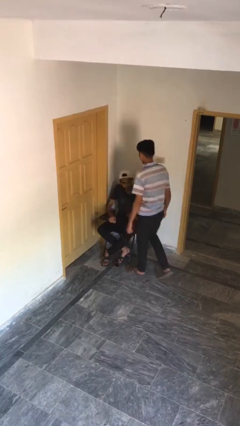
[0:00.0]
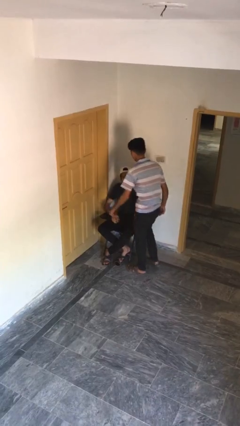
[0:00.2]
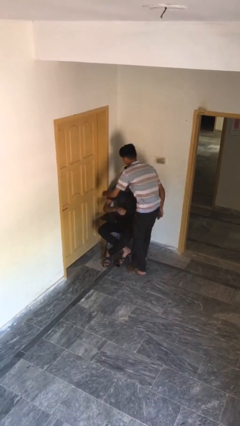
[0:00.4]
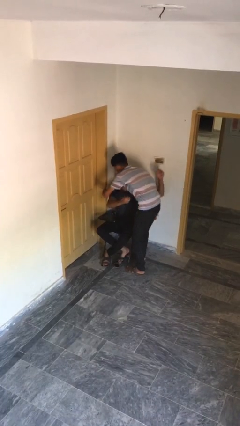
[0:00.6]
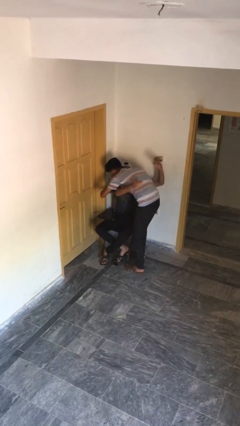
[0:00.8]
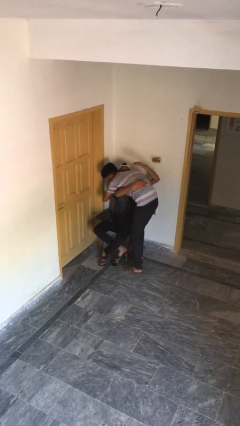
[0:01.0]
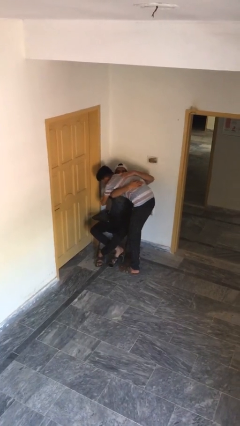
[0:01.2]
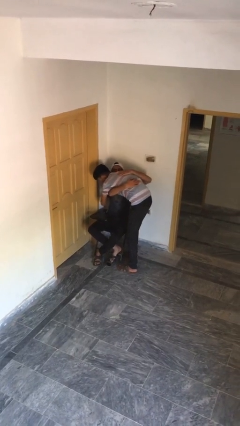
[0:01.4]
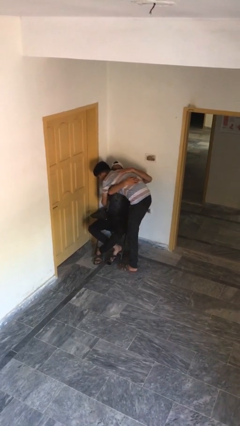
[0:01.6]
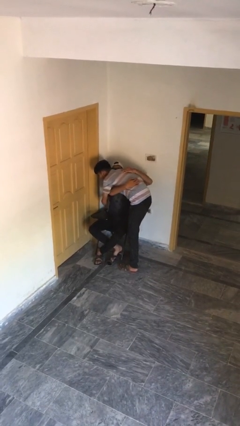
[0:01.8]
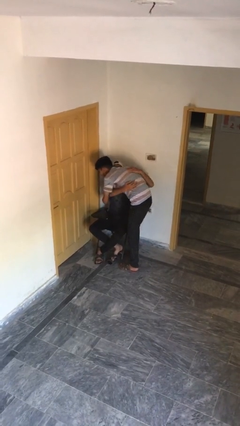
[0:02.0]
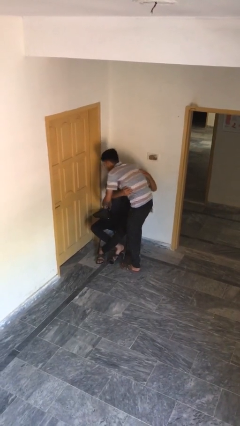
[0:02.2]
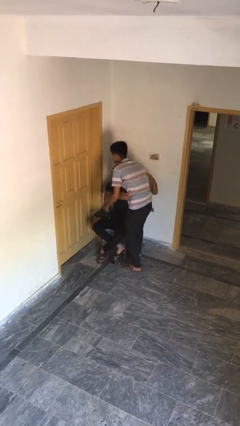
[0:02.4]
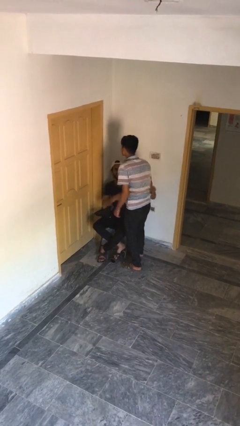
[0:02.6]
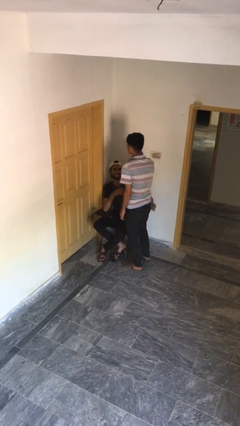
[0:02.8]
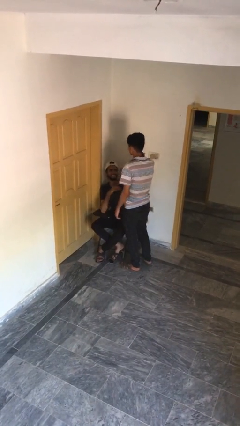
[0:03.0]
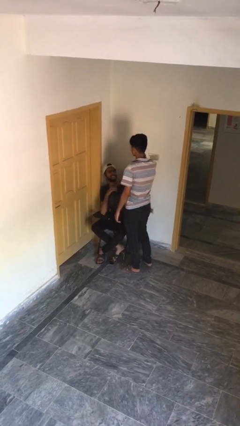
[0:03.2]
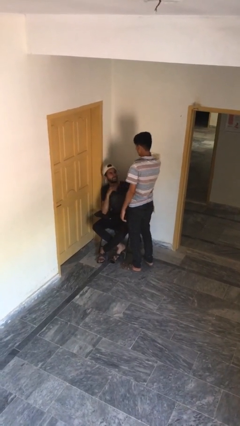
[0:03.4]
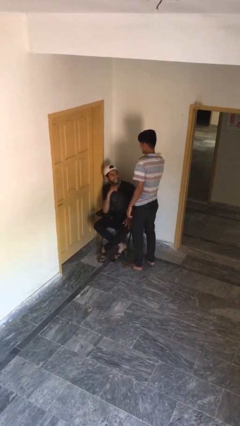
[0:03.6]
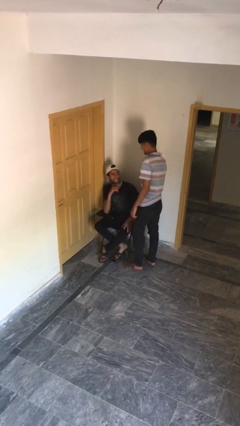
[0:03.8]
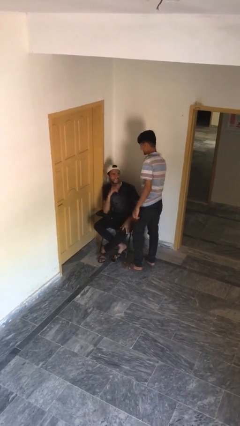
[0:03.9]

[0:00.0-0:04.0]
person embraces person

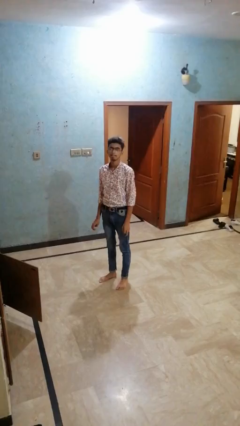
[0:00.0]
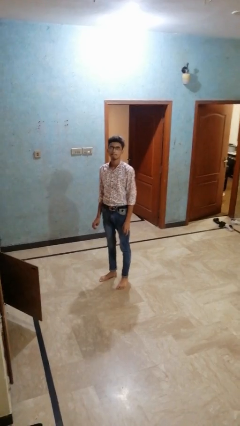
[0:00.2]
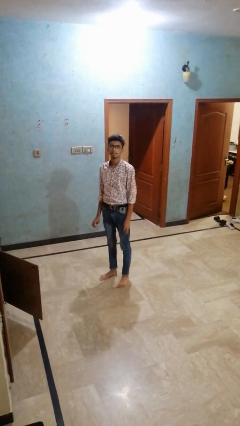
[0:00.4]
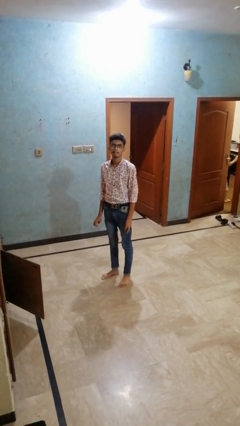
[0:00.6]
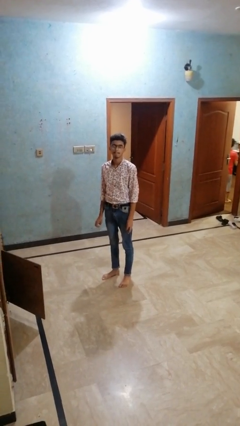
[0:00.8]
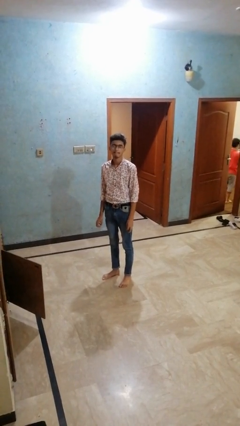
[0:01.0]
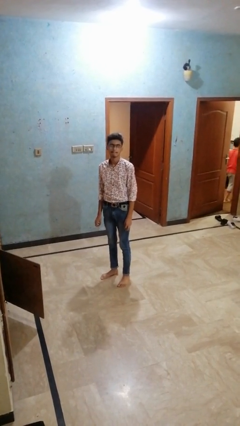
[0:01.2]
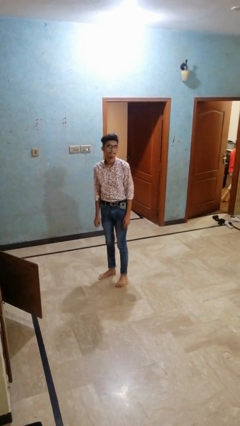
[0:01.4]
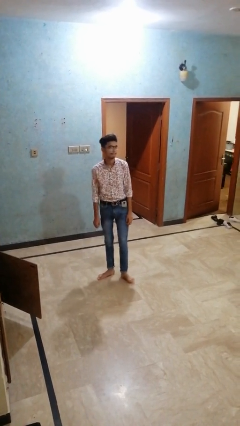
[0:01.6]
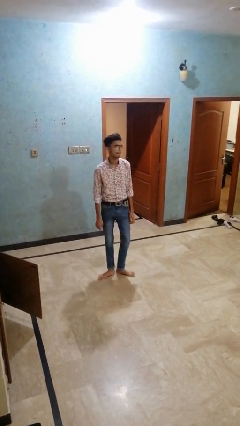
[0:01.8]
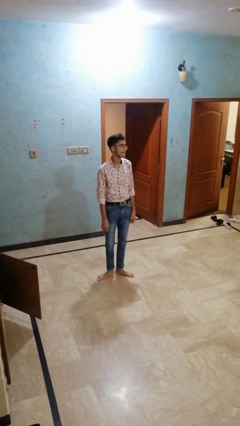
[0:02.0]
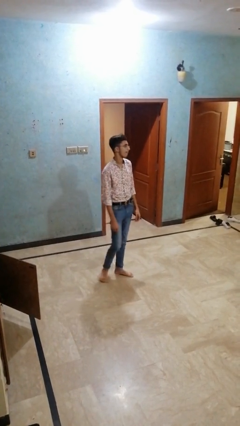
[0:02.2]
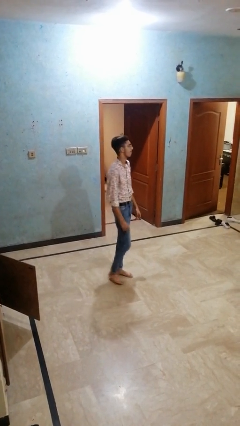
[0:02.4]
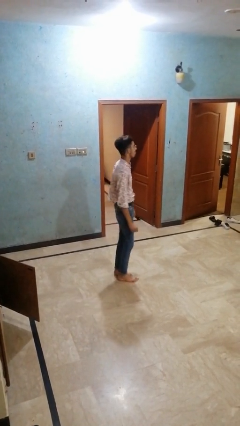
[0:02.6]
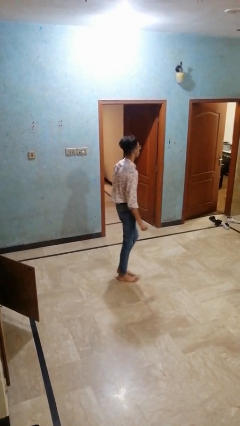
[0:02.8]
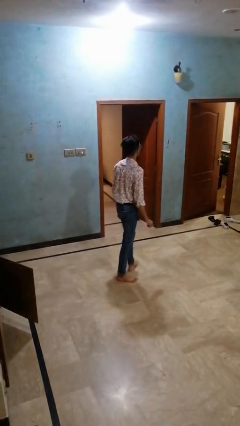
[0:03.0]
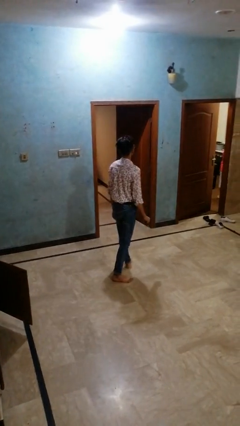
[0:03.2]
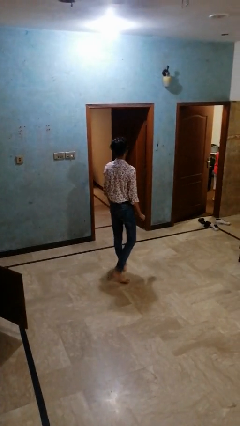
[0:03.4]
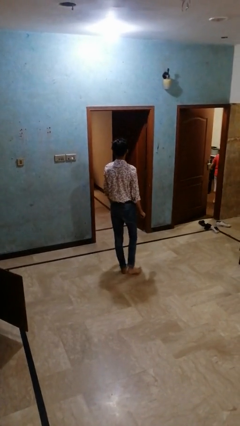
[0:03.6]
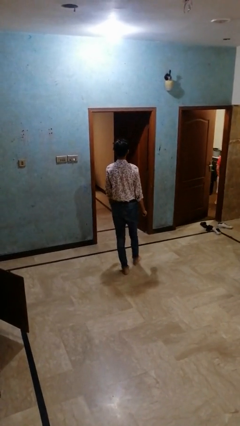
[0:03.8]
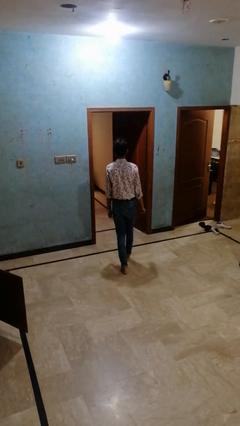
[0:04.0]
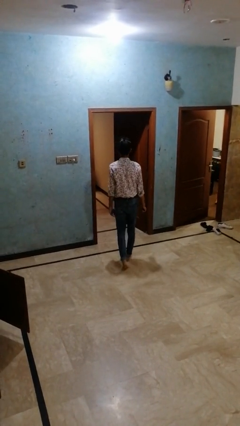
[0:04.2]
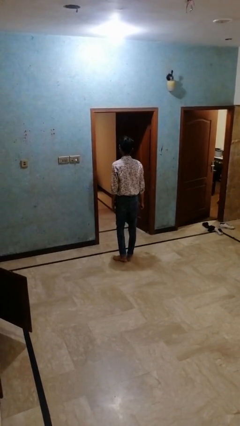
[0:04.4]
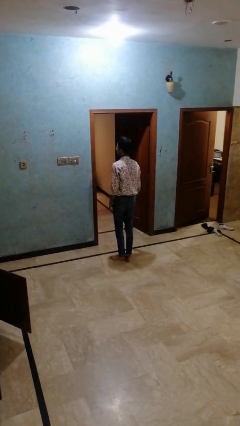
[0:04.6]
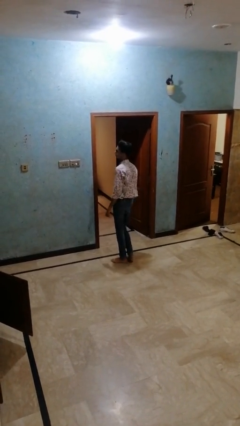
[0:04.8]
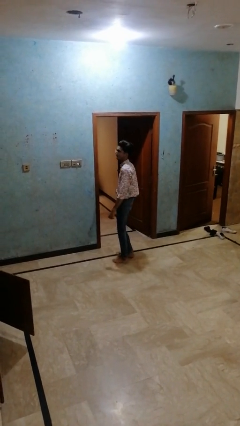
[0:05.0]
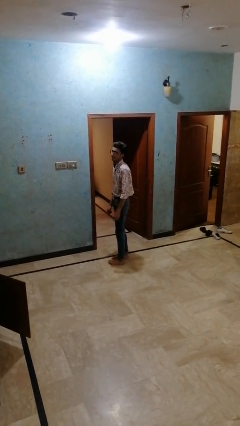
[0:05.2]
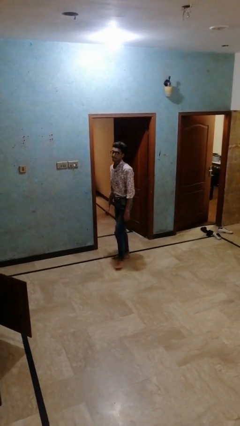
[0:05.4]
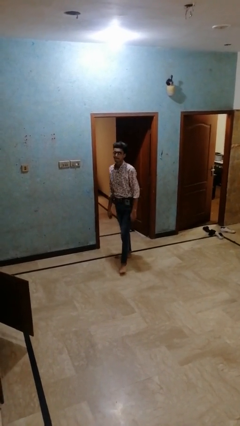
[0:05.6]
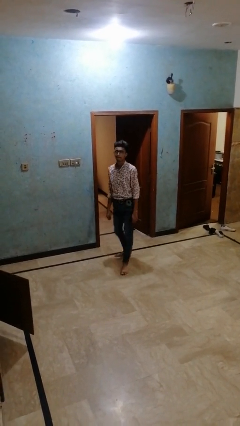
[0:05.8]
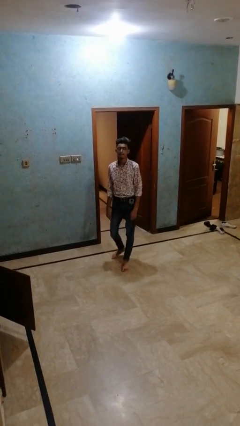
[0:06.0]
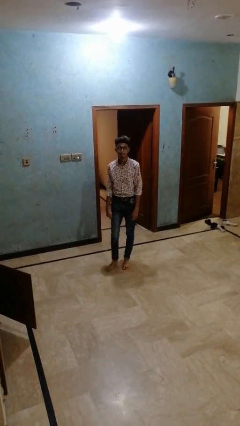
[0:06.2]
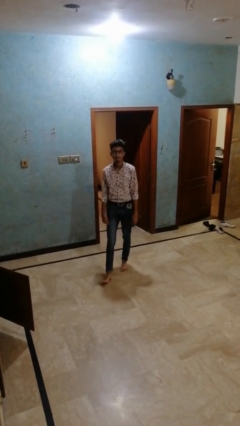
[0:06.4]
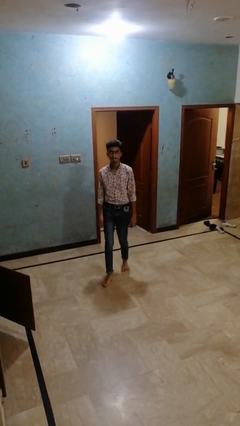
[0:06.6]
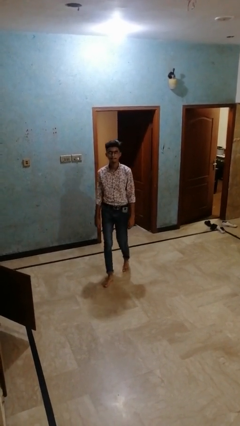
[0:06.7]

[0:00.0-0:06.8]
person twirls

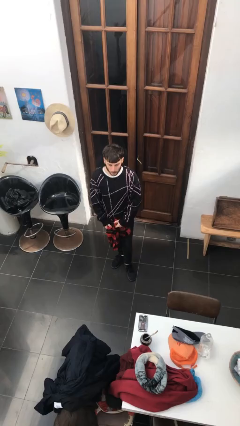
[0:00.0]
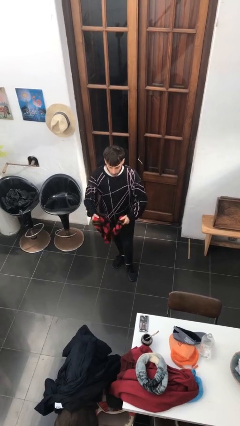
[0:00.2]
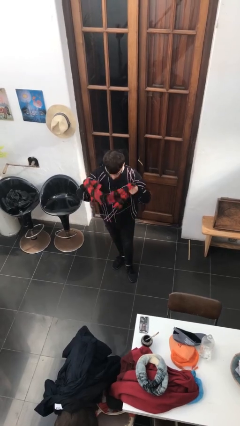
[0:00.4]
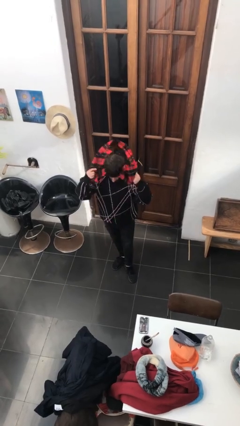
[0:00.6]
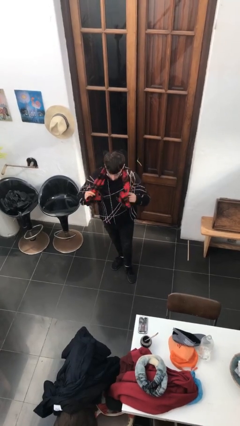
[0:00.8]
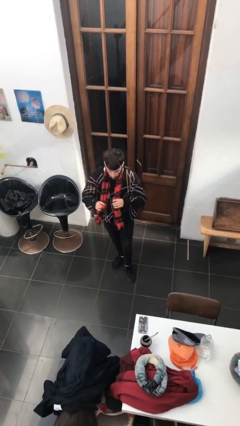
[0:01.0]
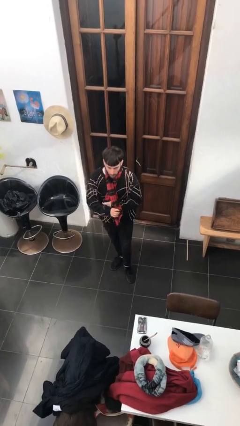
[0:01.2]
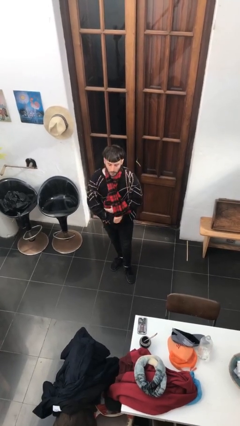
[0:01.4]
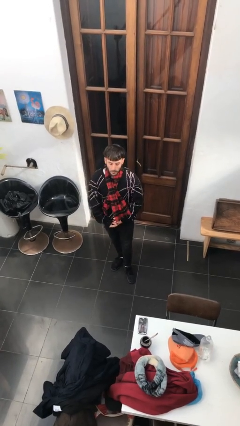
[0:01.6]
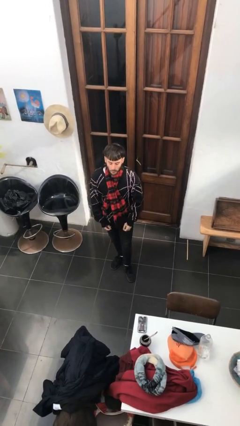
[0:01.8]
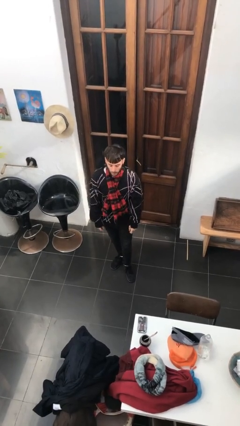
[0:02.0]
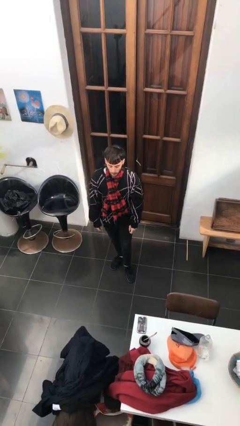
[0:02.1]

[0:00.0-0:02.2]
person puts on scarf

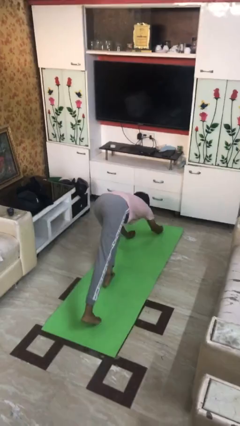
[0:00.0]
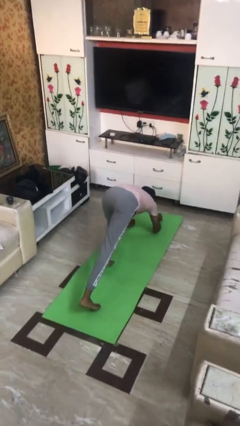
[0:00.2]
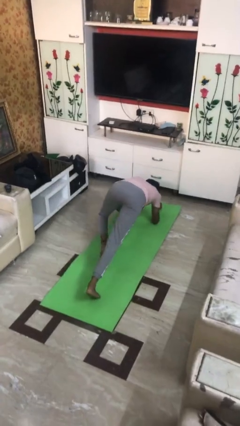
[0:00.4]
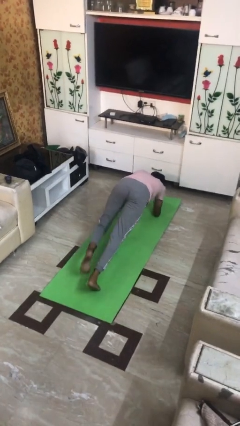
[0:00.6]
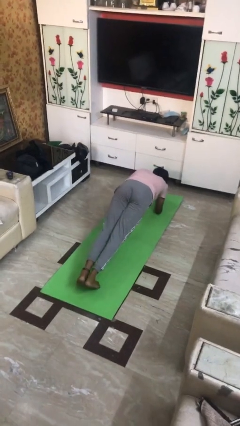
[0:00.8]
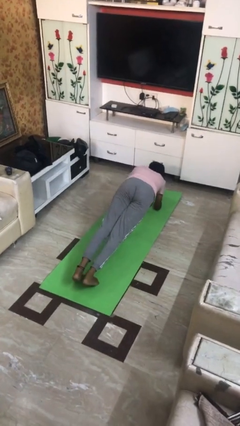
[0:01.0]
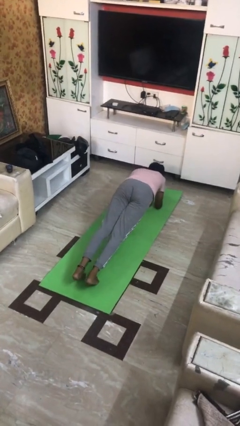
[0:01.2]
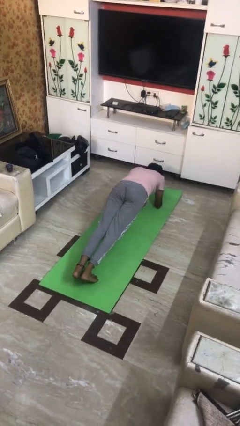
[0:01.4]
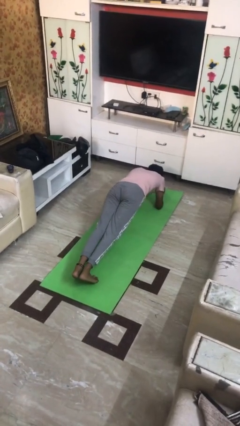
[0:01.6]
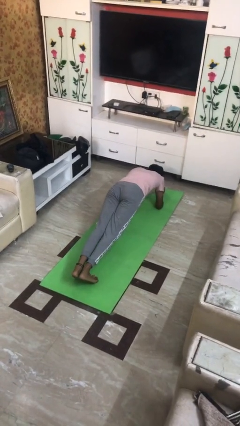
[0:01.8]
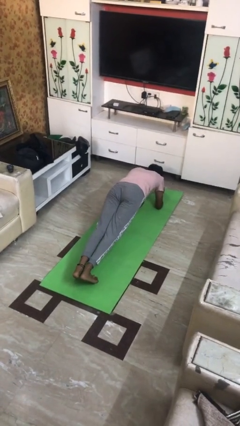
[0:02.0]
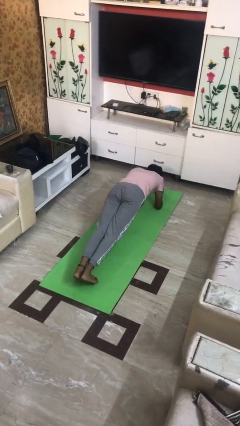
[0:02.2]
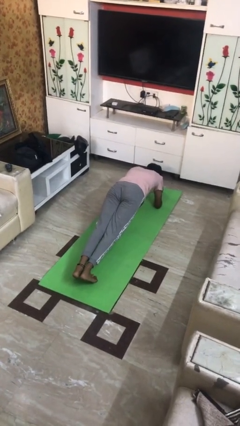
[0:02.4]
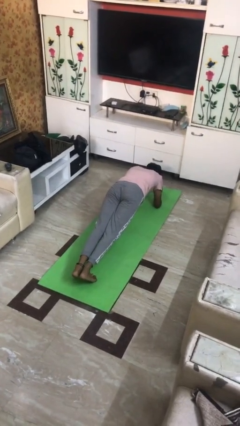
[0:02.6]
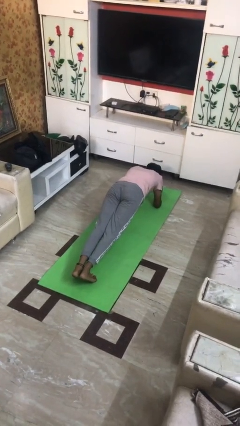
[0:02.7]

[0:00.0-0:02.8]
person exercises with plank

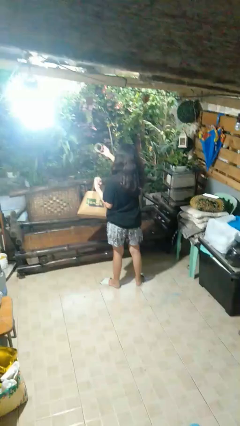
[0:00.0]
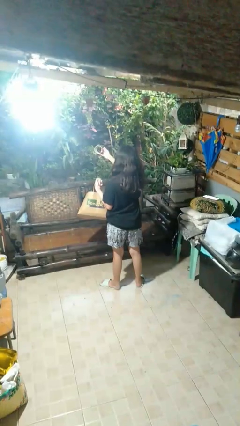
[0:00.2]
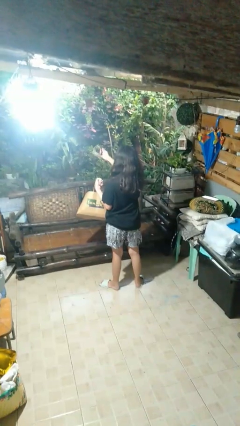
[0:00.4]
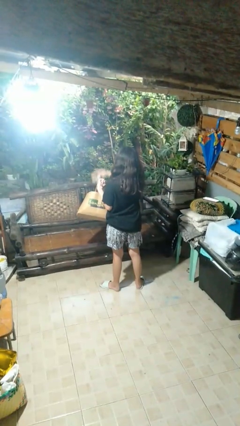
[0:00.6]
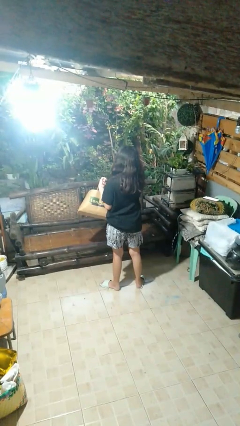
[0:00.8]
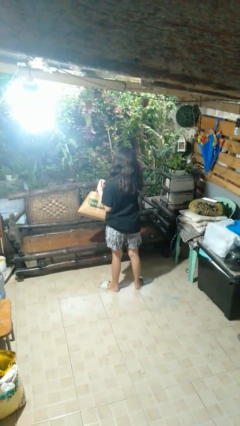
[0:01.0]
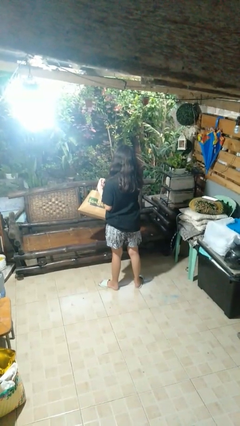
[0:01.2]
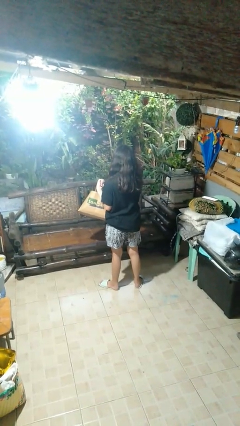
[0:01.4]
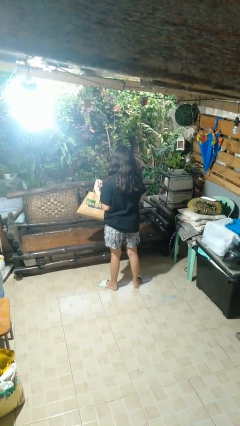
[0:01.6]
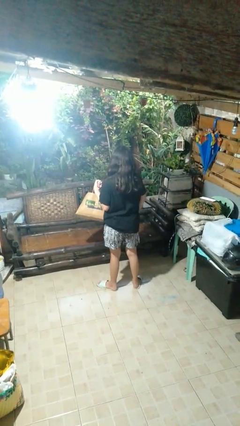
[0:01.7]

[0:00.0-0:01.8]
person puts object into bag
